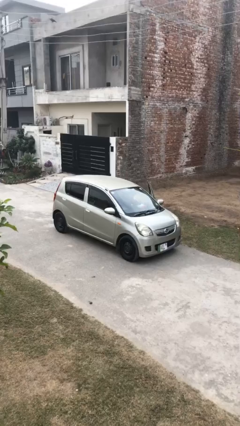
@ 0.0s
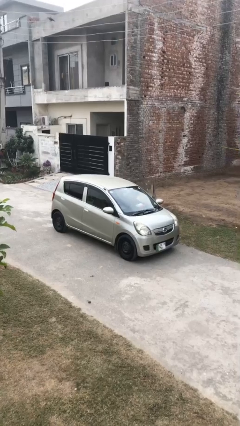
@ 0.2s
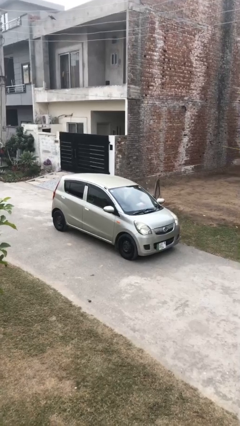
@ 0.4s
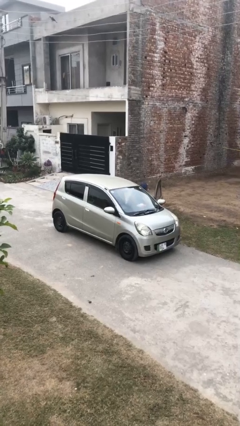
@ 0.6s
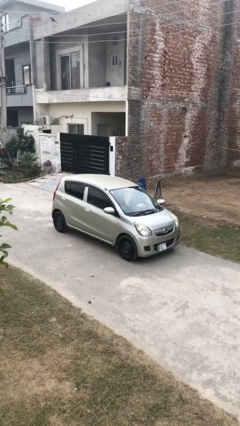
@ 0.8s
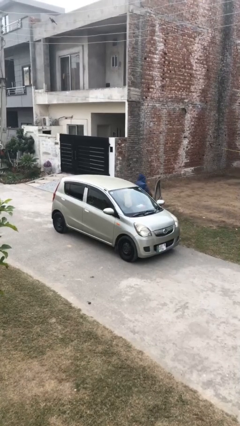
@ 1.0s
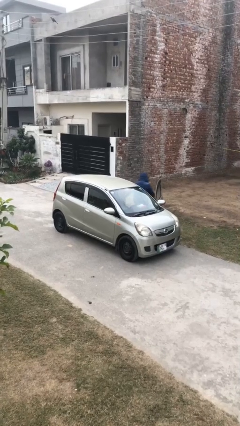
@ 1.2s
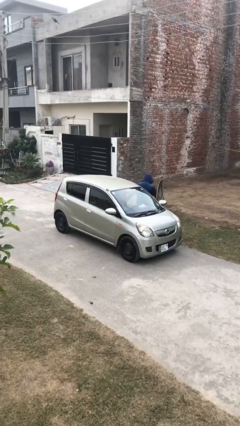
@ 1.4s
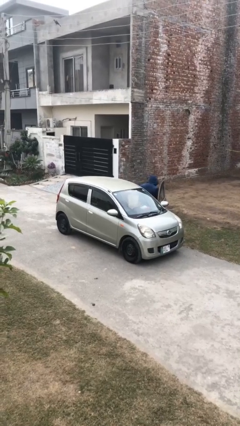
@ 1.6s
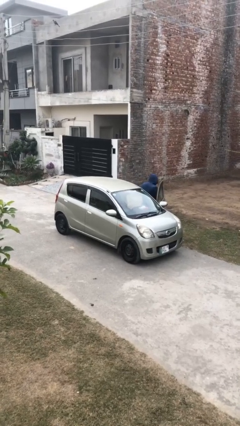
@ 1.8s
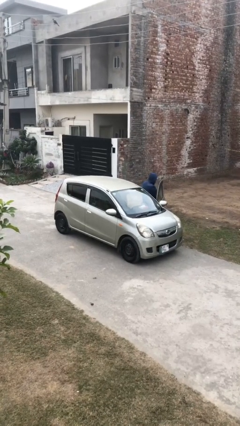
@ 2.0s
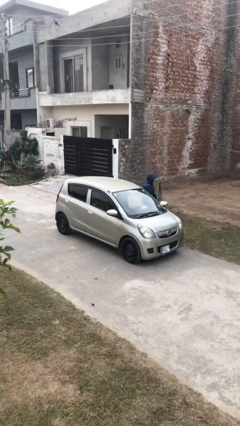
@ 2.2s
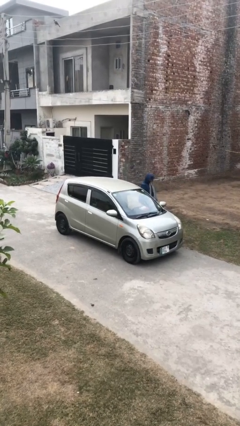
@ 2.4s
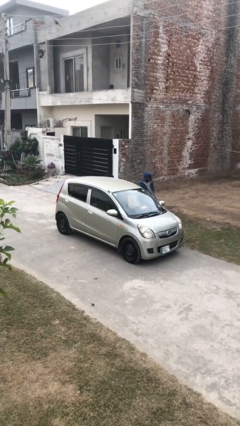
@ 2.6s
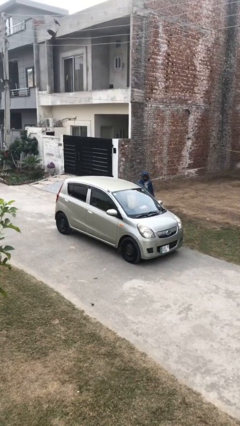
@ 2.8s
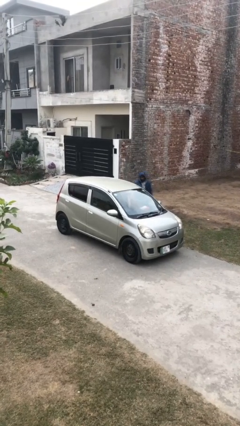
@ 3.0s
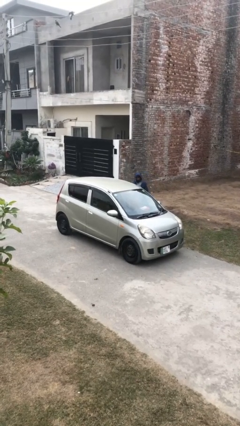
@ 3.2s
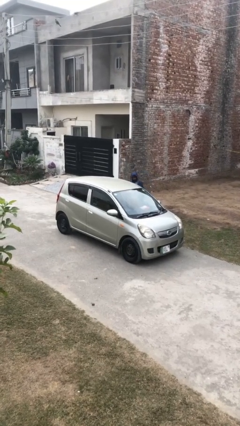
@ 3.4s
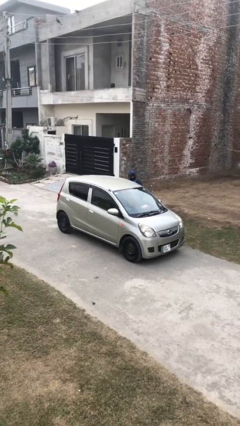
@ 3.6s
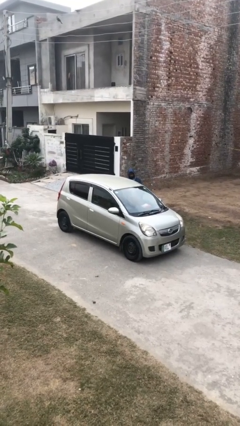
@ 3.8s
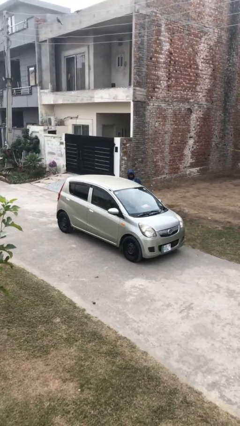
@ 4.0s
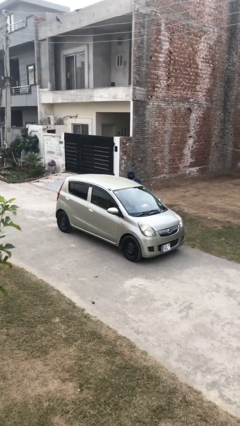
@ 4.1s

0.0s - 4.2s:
car drops off person

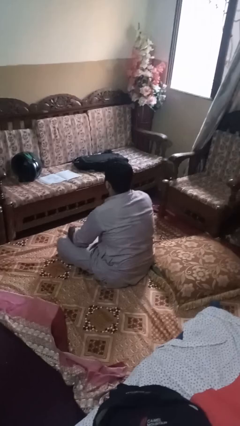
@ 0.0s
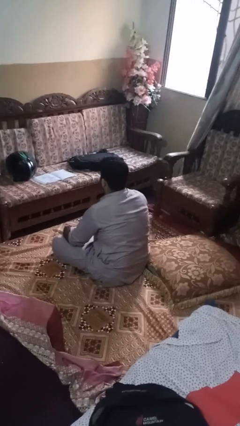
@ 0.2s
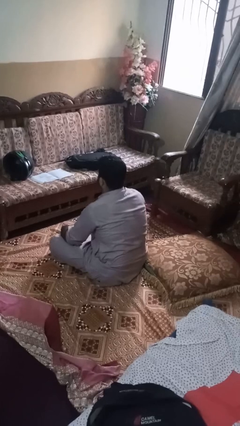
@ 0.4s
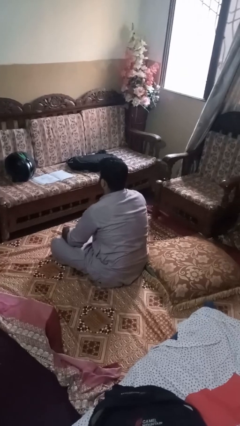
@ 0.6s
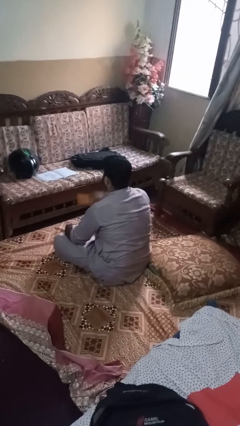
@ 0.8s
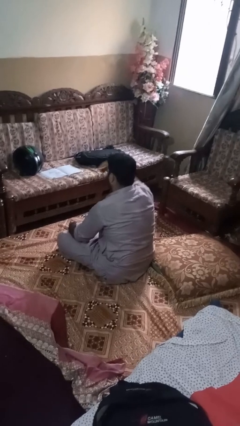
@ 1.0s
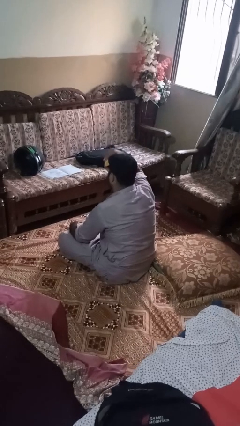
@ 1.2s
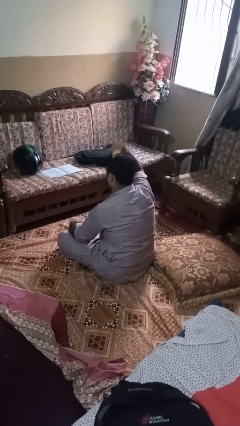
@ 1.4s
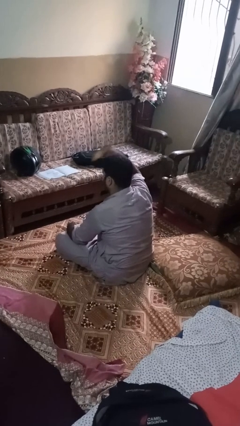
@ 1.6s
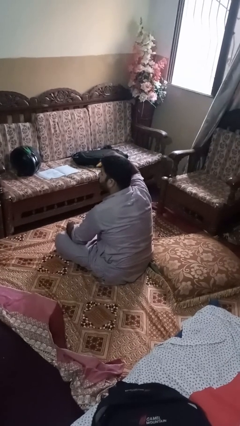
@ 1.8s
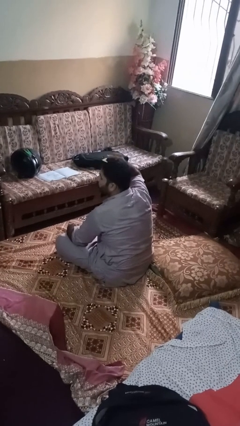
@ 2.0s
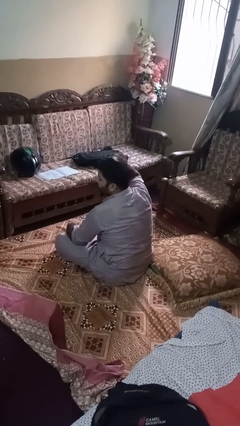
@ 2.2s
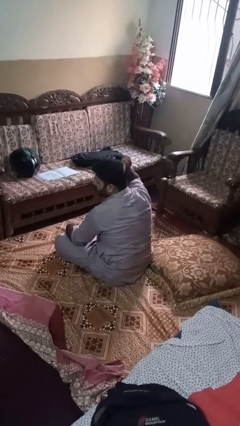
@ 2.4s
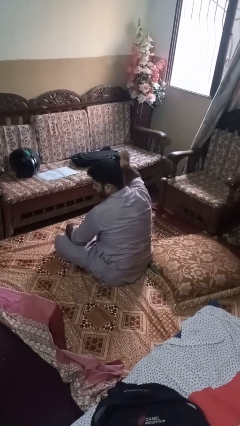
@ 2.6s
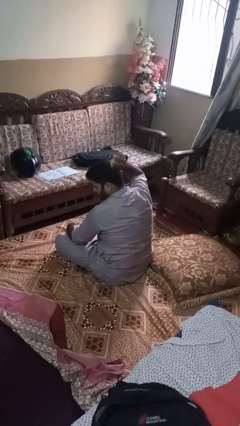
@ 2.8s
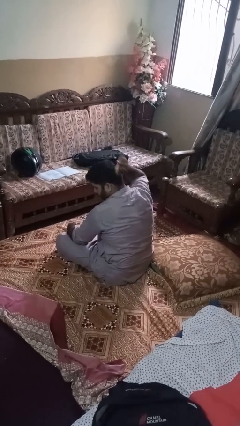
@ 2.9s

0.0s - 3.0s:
person brushes hair

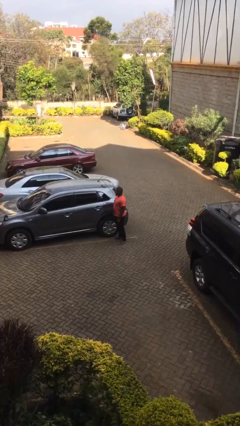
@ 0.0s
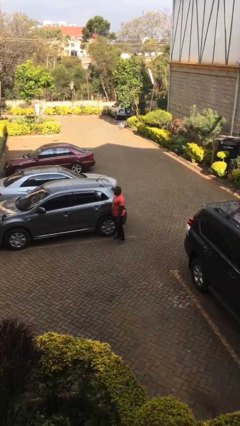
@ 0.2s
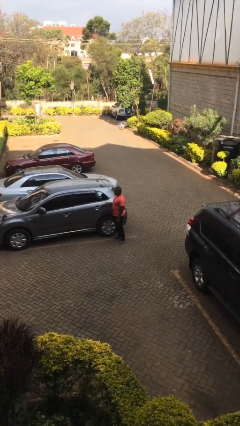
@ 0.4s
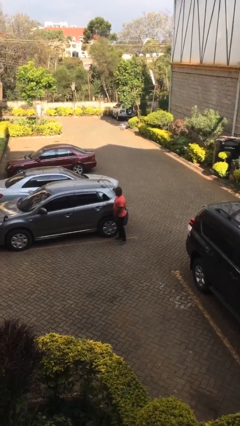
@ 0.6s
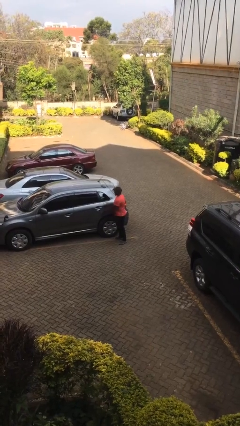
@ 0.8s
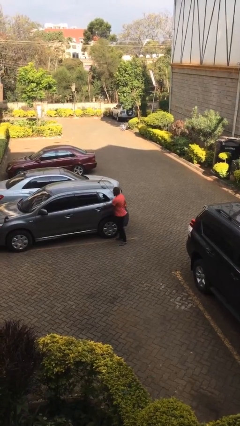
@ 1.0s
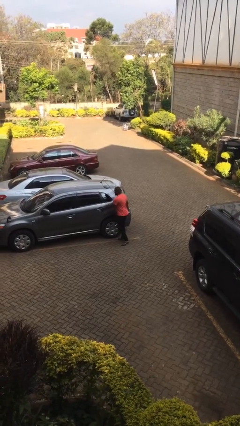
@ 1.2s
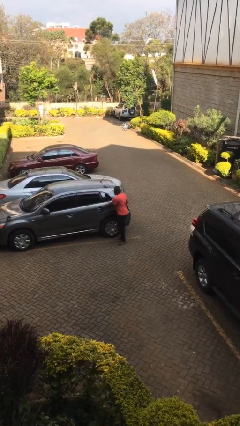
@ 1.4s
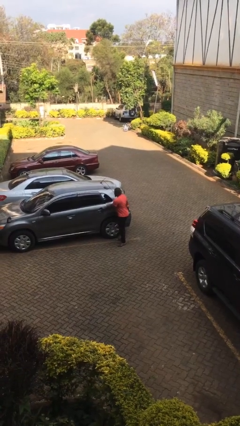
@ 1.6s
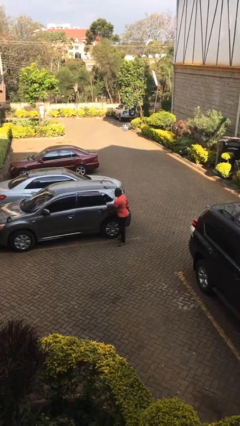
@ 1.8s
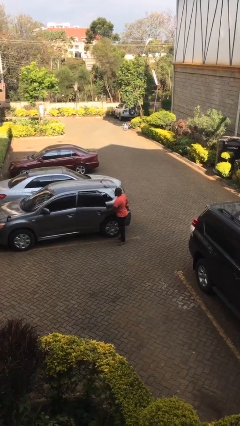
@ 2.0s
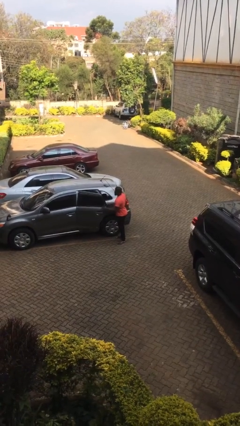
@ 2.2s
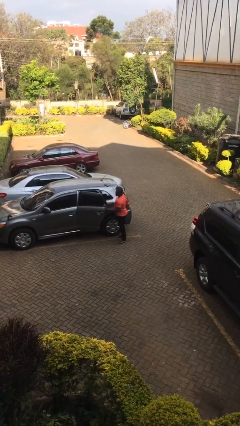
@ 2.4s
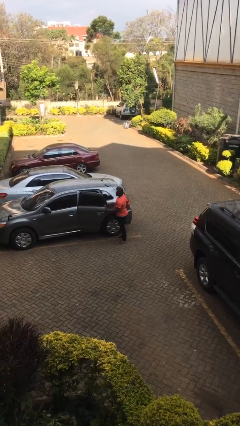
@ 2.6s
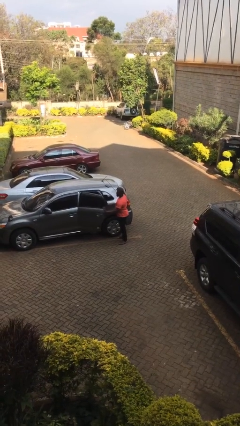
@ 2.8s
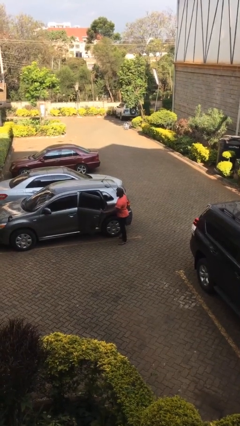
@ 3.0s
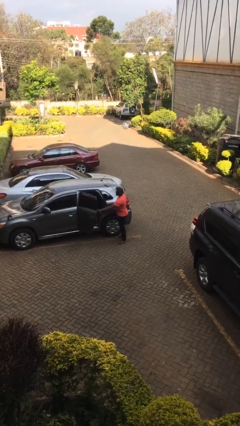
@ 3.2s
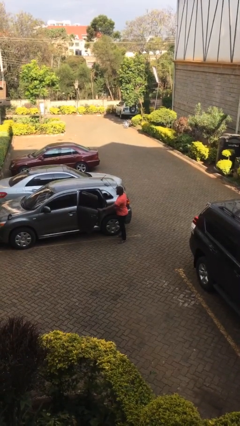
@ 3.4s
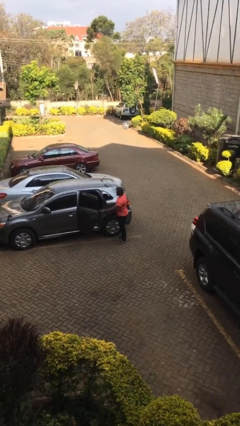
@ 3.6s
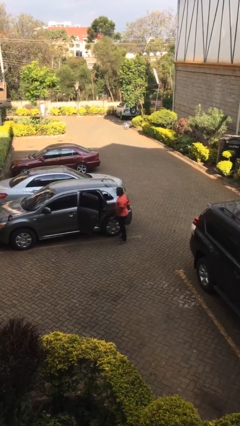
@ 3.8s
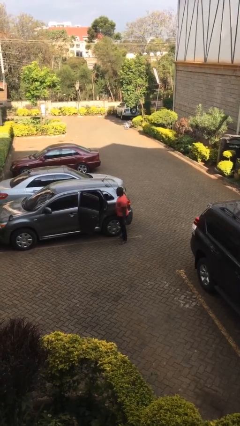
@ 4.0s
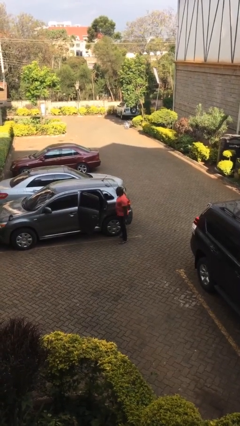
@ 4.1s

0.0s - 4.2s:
person opens car door

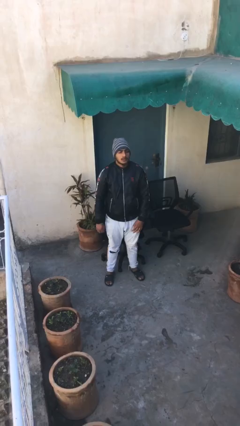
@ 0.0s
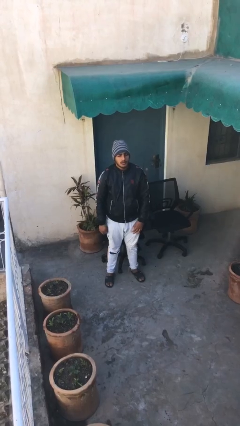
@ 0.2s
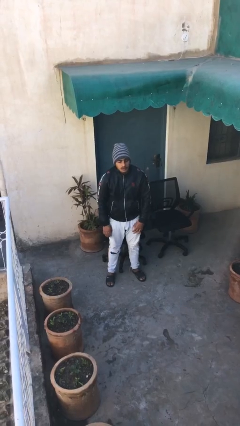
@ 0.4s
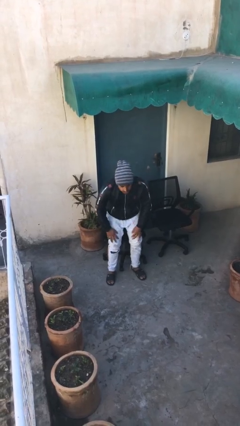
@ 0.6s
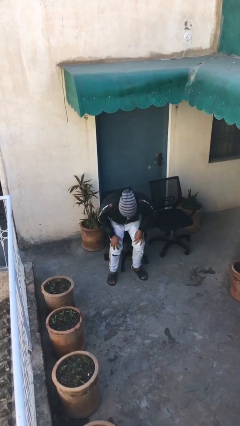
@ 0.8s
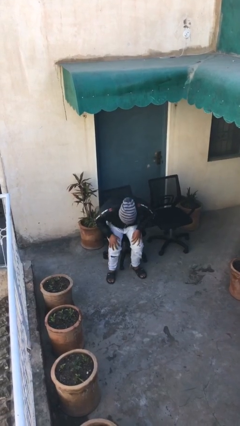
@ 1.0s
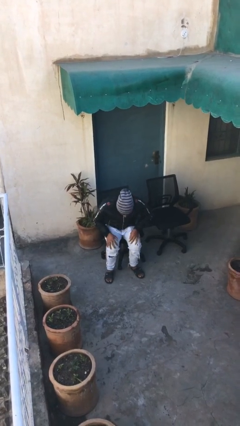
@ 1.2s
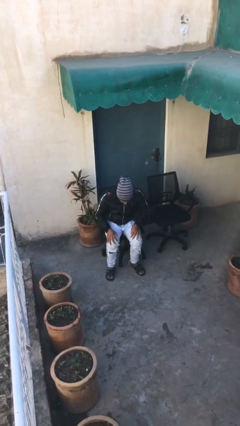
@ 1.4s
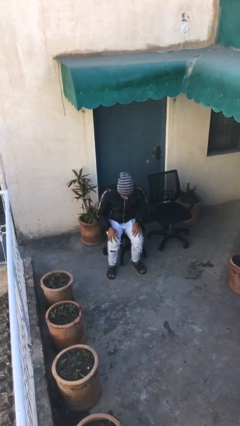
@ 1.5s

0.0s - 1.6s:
person sits down

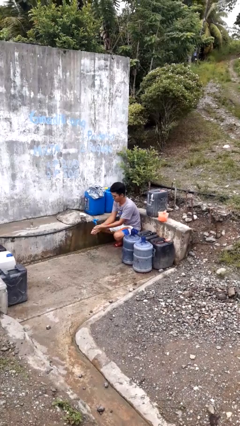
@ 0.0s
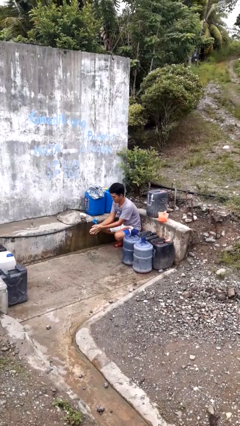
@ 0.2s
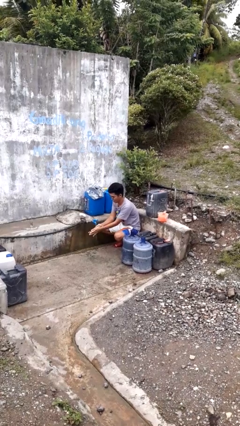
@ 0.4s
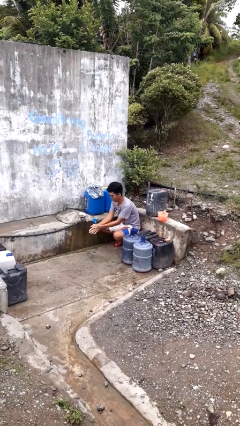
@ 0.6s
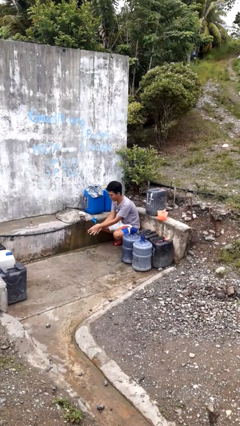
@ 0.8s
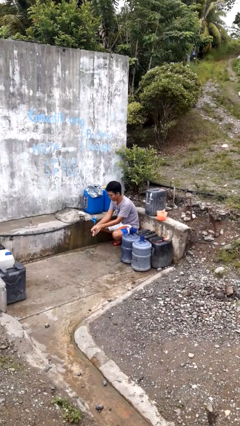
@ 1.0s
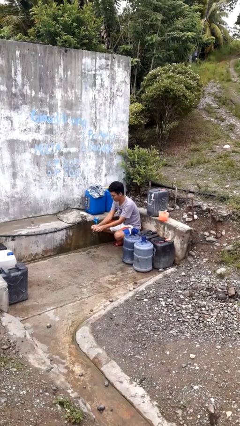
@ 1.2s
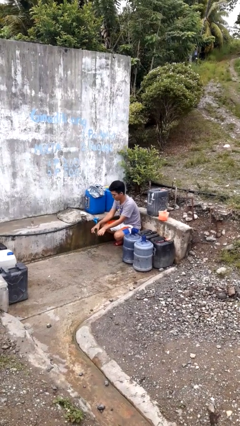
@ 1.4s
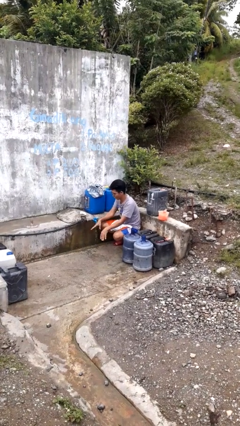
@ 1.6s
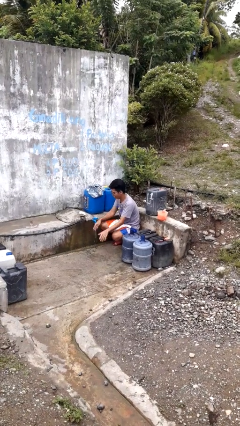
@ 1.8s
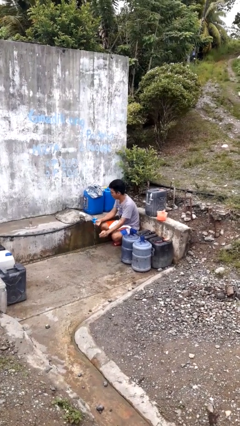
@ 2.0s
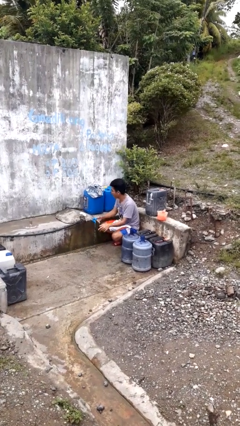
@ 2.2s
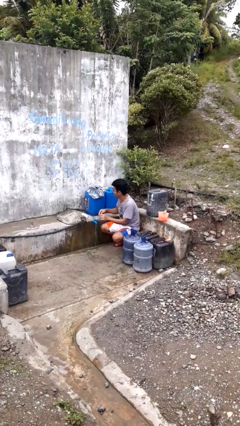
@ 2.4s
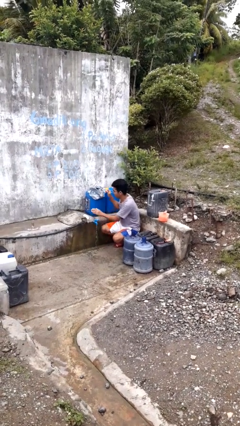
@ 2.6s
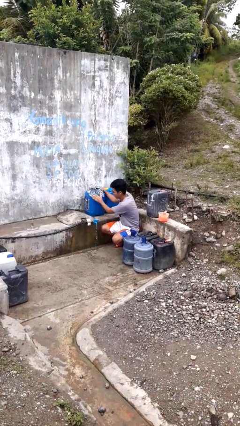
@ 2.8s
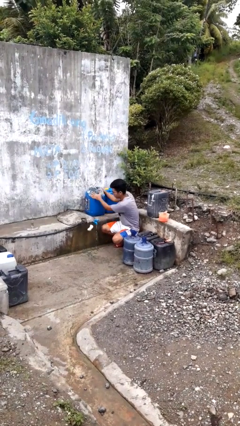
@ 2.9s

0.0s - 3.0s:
person washes hands

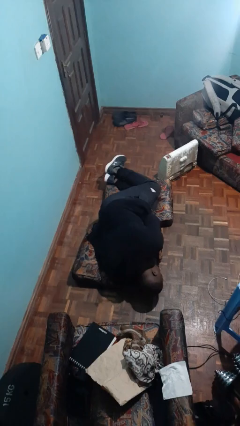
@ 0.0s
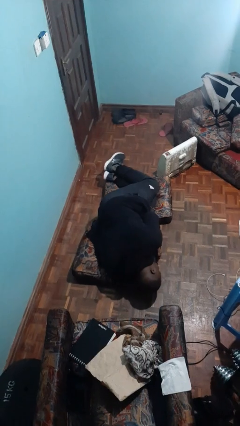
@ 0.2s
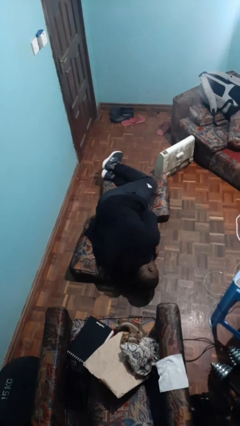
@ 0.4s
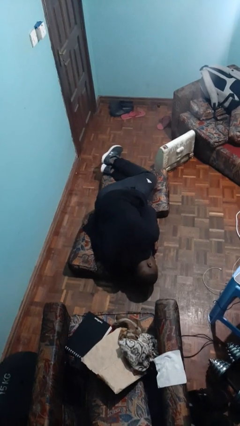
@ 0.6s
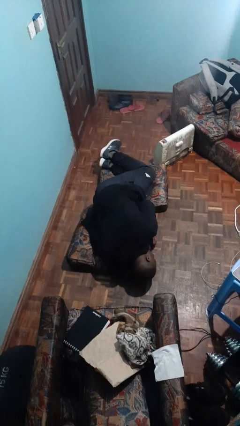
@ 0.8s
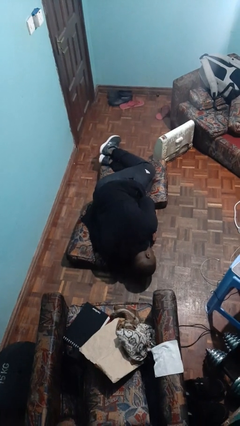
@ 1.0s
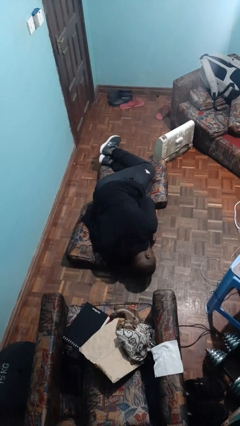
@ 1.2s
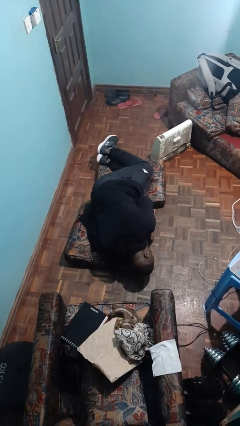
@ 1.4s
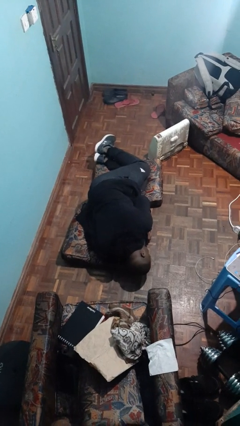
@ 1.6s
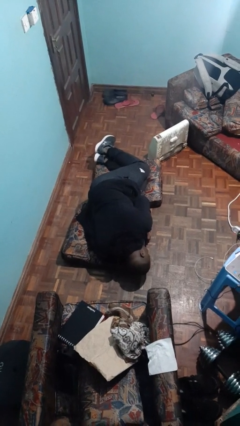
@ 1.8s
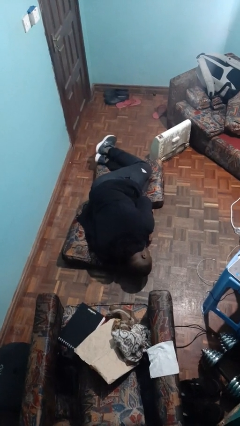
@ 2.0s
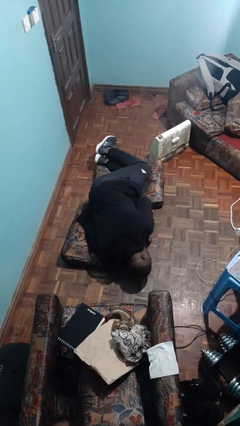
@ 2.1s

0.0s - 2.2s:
person lies down on floor
